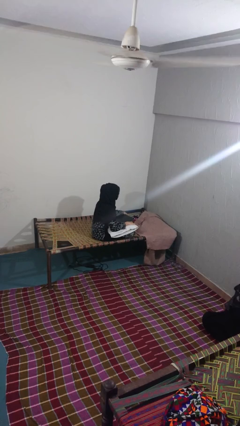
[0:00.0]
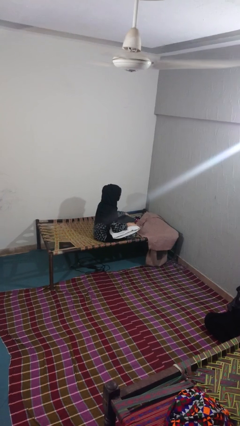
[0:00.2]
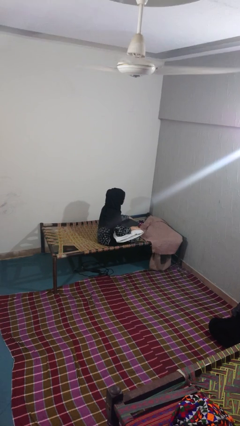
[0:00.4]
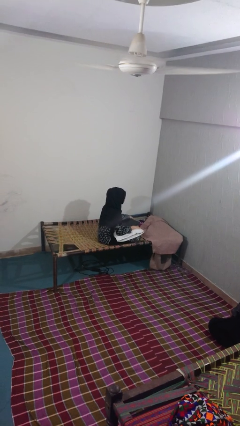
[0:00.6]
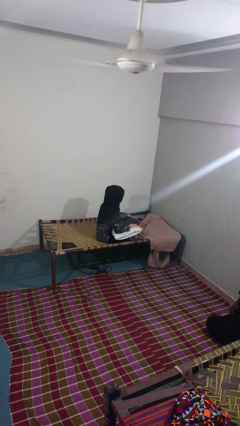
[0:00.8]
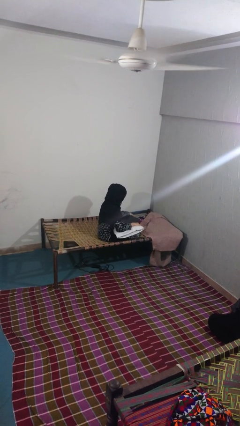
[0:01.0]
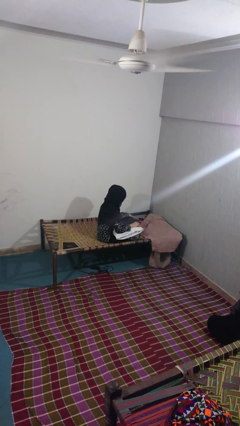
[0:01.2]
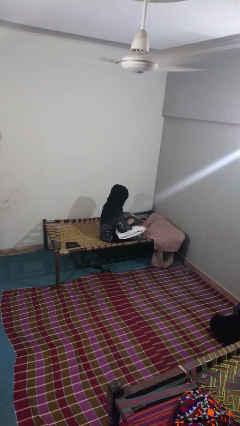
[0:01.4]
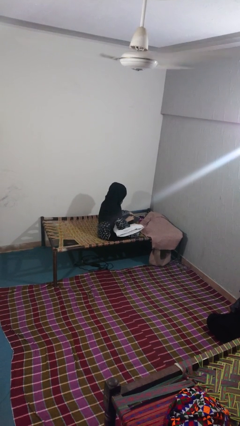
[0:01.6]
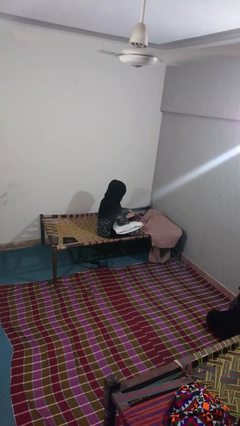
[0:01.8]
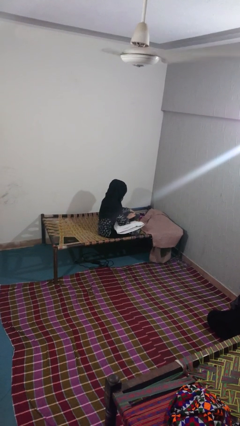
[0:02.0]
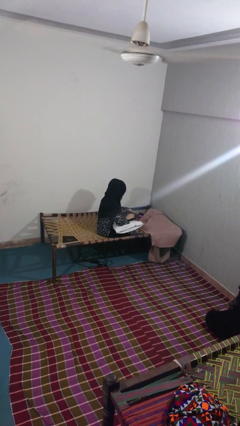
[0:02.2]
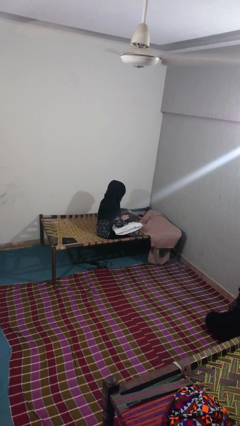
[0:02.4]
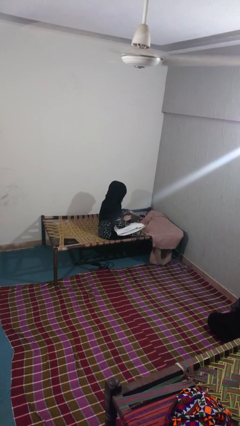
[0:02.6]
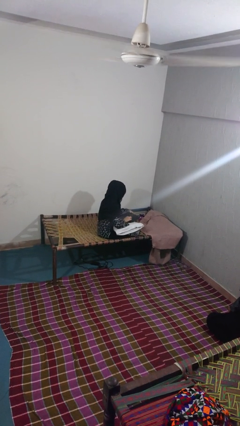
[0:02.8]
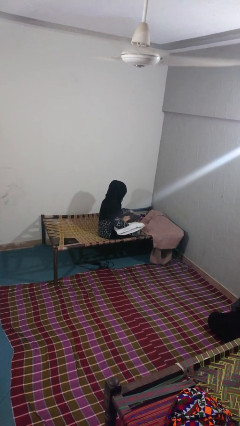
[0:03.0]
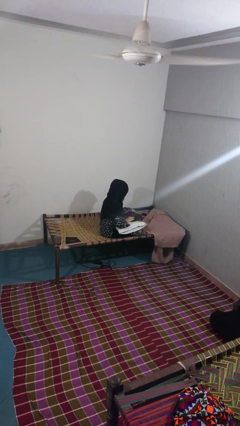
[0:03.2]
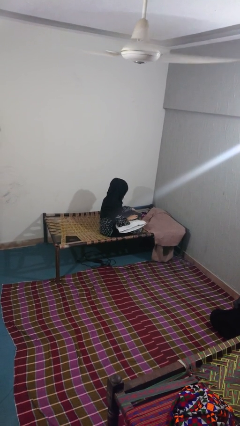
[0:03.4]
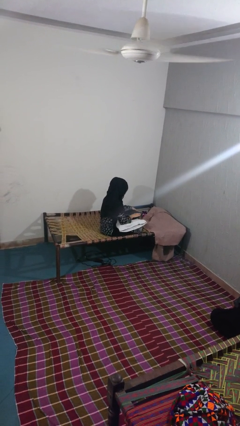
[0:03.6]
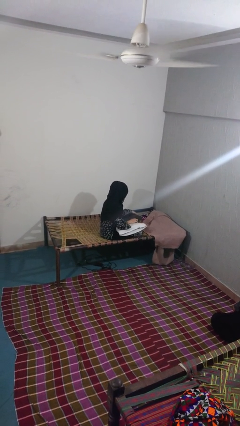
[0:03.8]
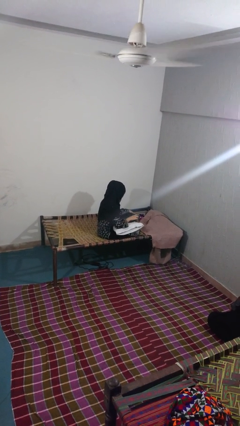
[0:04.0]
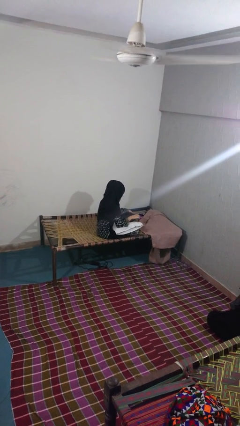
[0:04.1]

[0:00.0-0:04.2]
person interacts with tablet

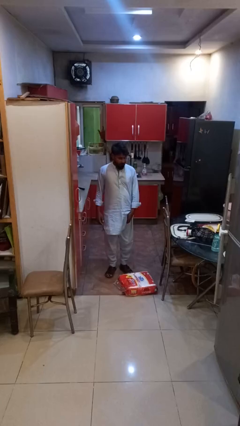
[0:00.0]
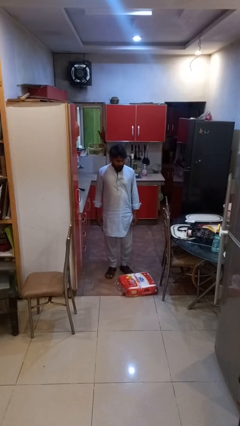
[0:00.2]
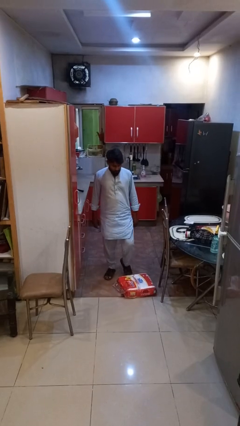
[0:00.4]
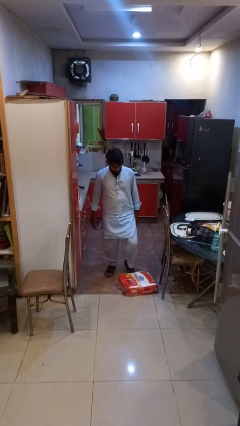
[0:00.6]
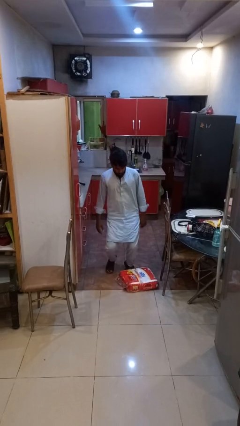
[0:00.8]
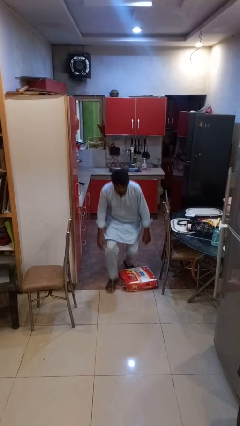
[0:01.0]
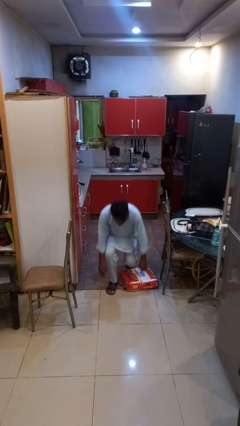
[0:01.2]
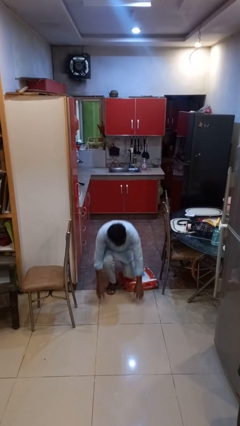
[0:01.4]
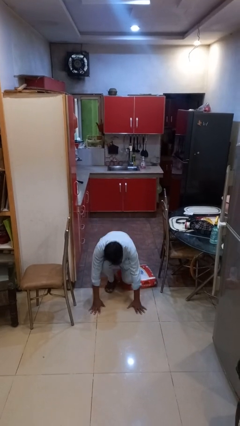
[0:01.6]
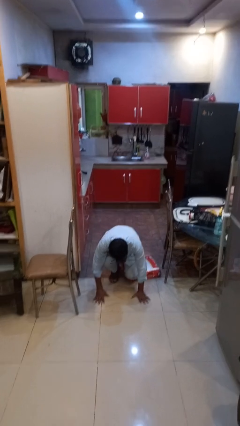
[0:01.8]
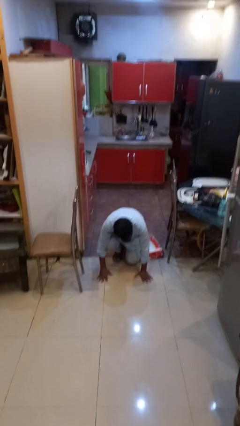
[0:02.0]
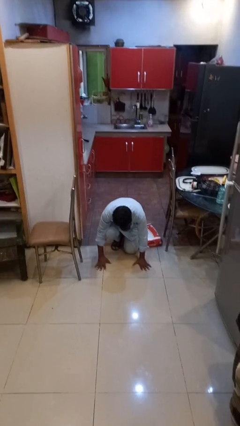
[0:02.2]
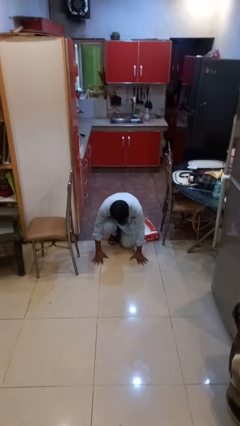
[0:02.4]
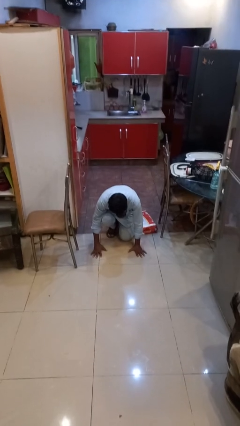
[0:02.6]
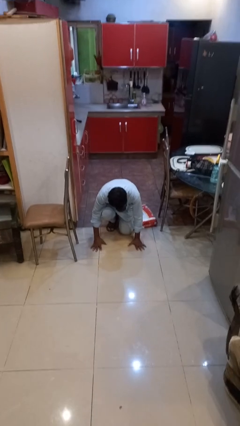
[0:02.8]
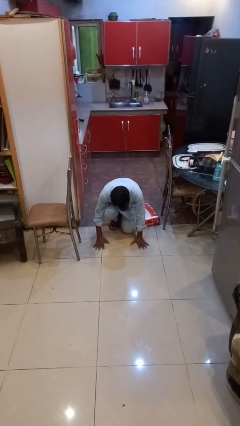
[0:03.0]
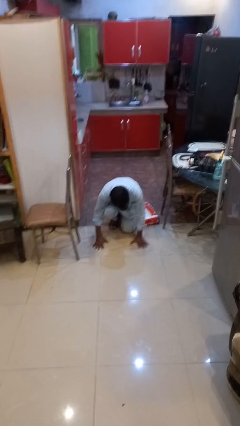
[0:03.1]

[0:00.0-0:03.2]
person trips on object on floor

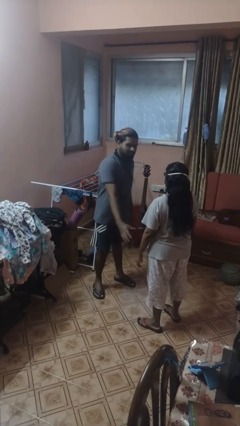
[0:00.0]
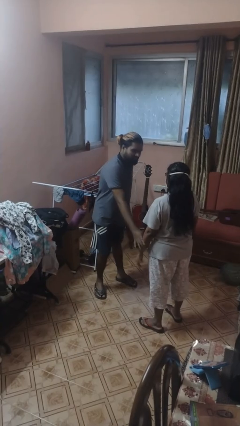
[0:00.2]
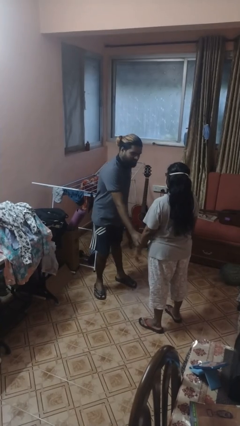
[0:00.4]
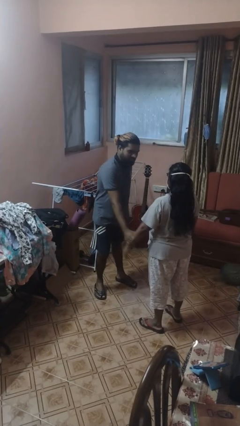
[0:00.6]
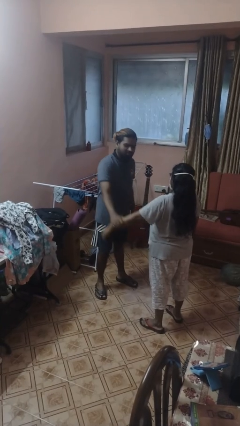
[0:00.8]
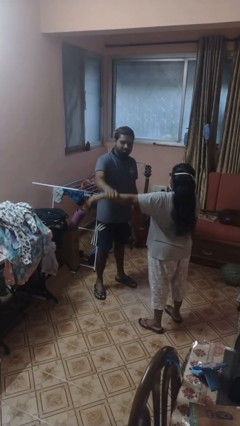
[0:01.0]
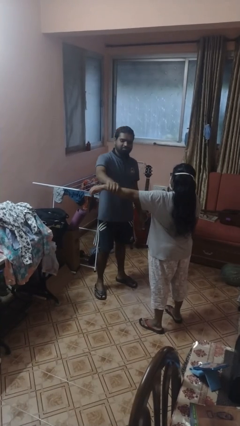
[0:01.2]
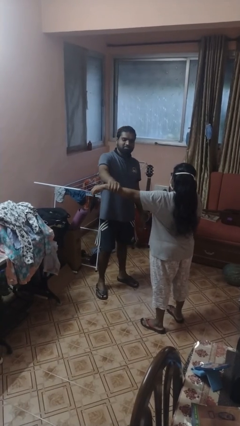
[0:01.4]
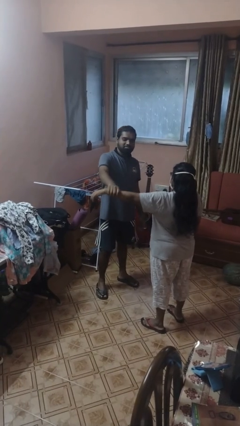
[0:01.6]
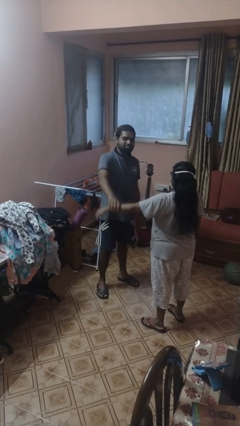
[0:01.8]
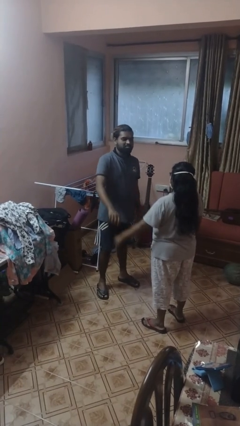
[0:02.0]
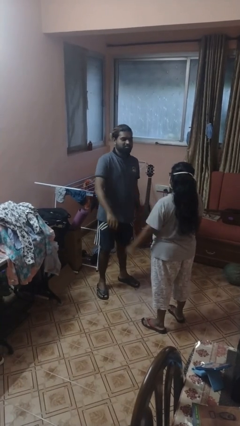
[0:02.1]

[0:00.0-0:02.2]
person grabs person by forearm

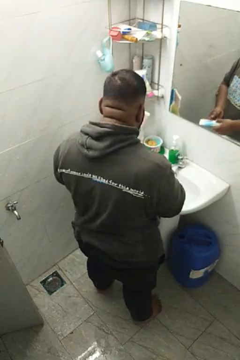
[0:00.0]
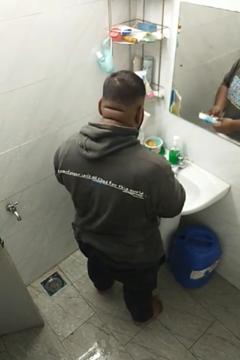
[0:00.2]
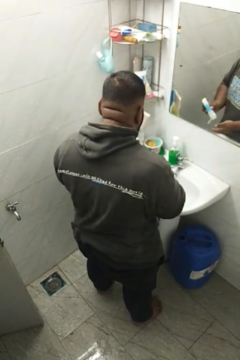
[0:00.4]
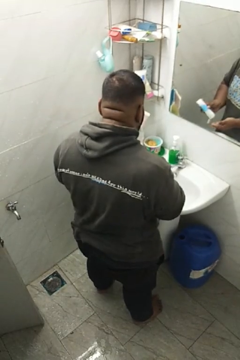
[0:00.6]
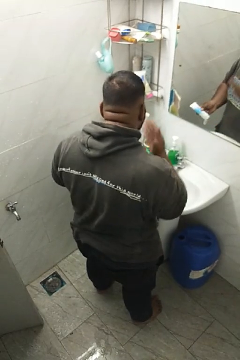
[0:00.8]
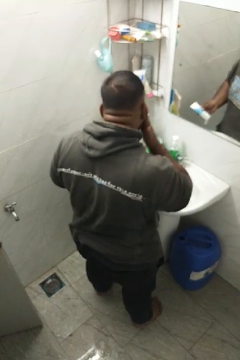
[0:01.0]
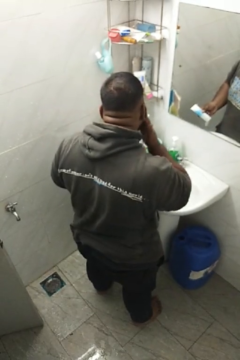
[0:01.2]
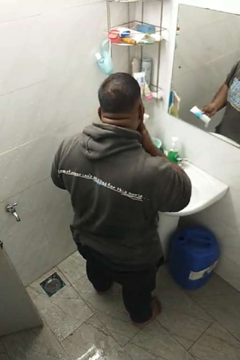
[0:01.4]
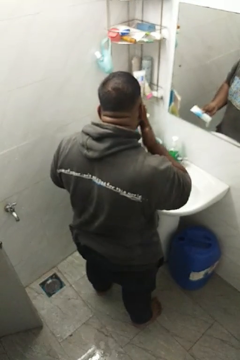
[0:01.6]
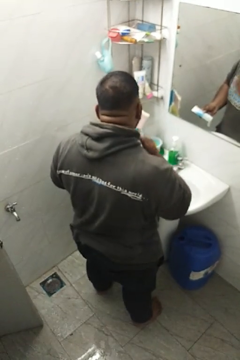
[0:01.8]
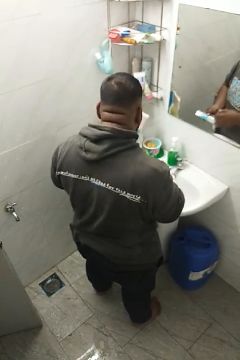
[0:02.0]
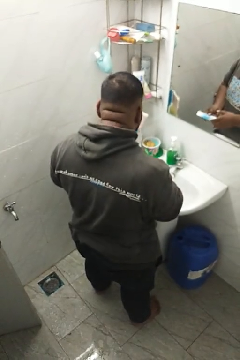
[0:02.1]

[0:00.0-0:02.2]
person applies shaving cream

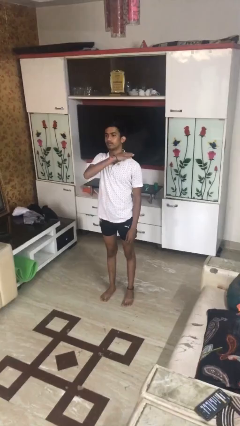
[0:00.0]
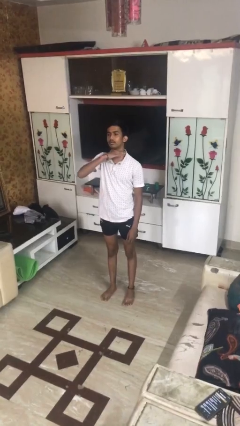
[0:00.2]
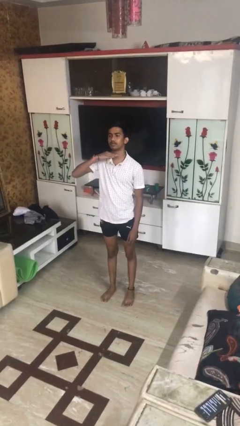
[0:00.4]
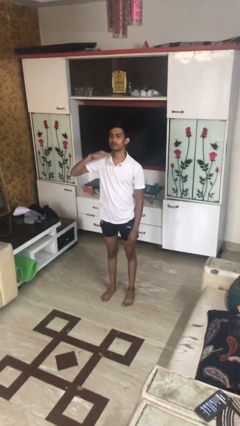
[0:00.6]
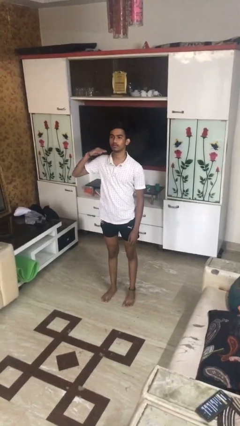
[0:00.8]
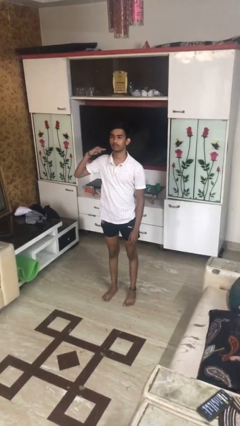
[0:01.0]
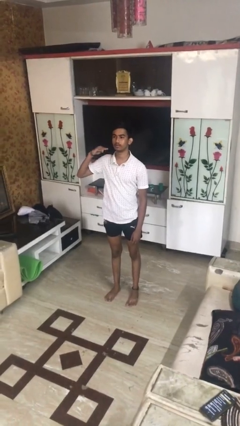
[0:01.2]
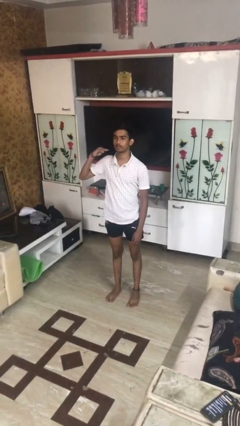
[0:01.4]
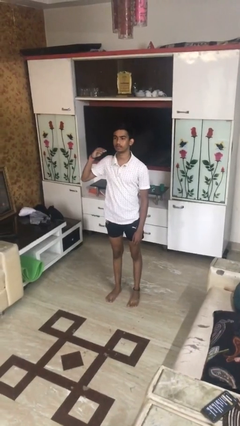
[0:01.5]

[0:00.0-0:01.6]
person gestures cut

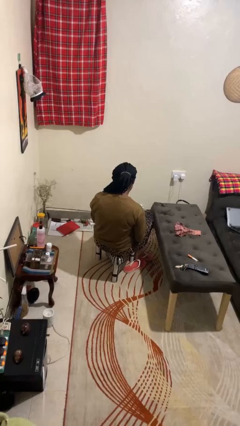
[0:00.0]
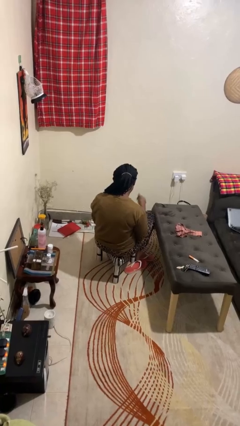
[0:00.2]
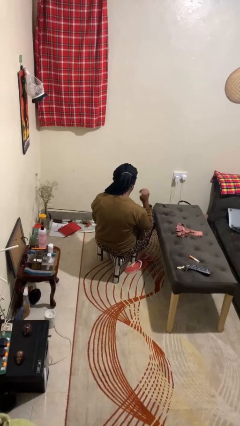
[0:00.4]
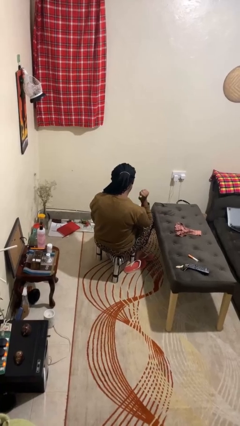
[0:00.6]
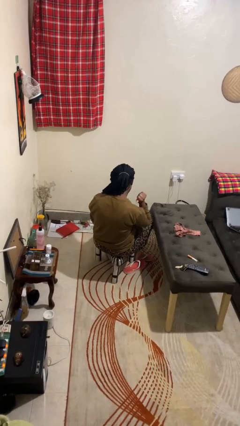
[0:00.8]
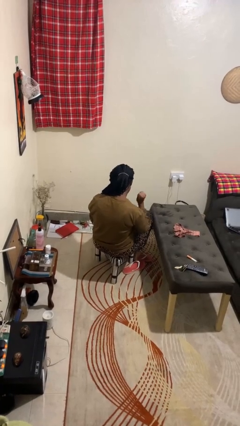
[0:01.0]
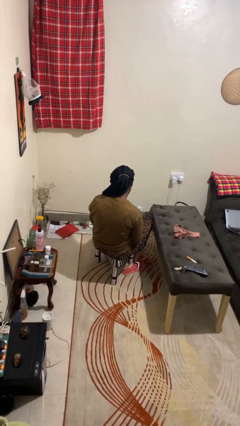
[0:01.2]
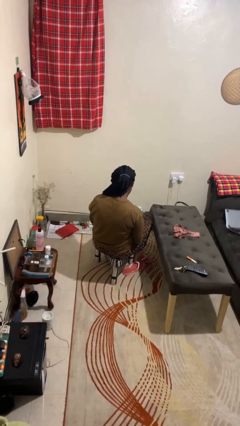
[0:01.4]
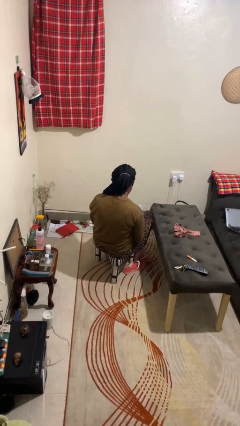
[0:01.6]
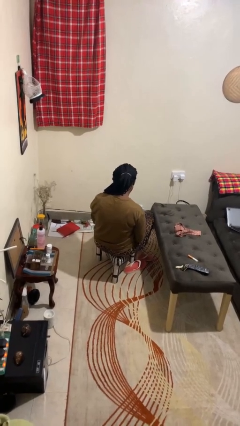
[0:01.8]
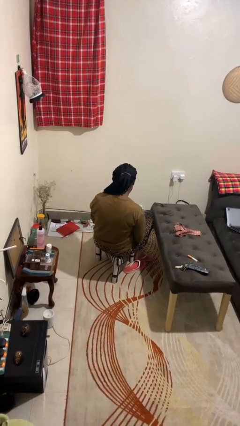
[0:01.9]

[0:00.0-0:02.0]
person gestures behind me

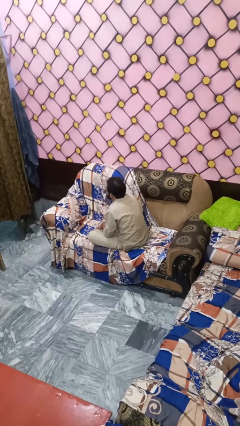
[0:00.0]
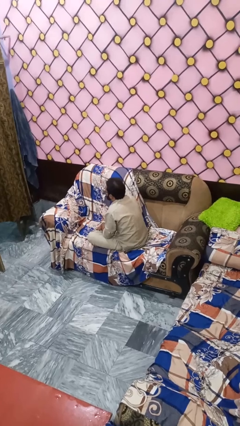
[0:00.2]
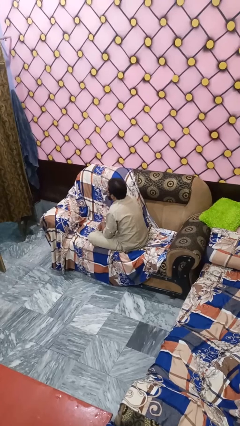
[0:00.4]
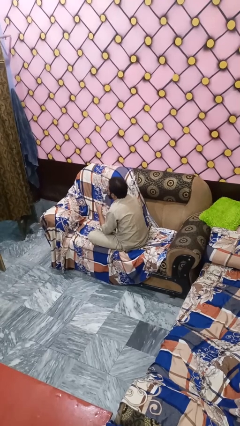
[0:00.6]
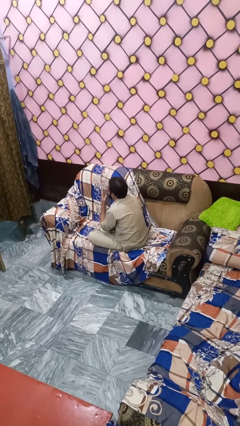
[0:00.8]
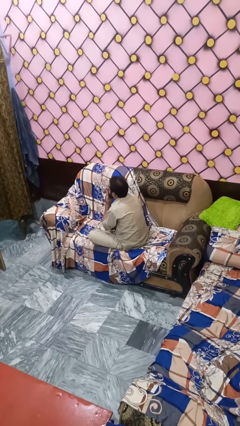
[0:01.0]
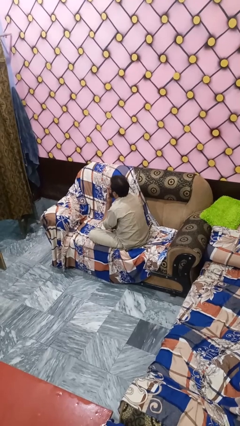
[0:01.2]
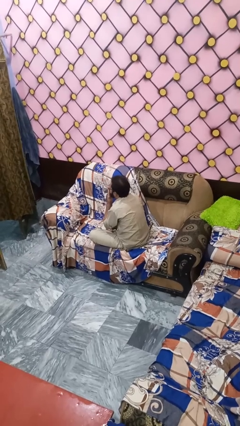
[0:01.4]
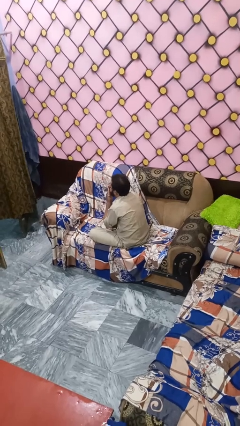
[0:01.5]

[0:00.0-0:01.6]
person gestures blow kiss

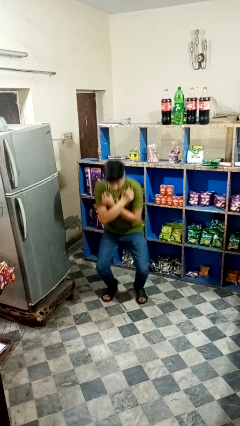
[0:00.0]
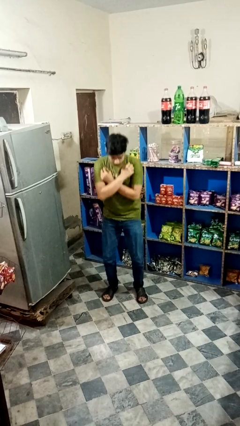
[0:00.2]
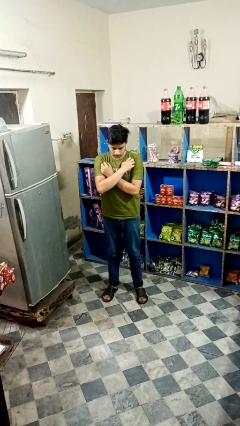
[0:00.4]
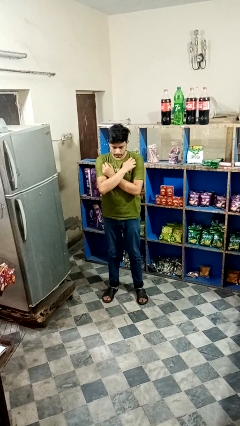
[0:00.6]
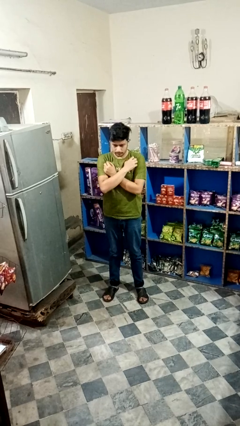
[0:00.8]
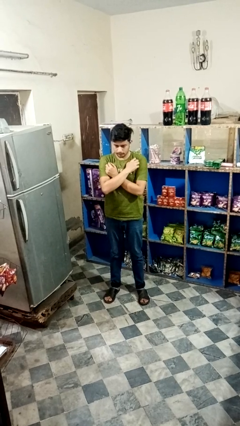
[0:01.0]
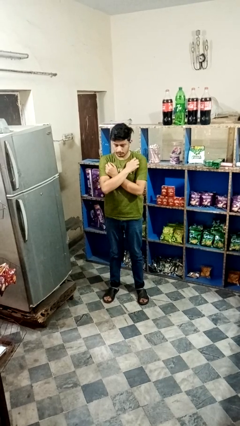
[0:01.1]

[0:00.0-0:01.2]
person stands up
